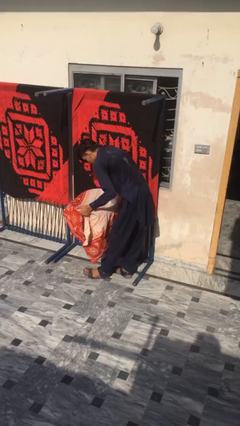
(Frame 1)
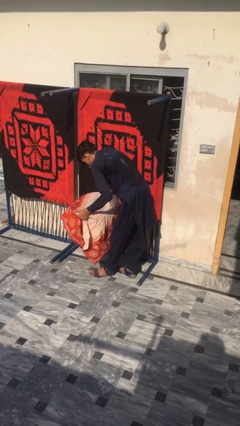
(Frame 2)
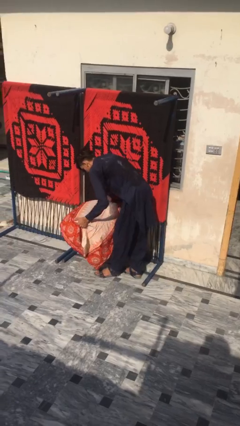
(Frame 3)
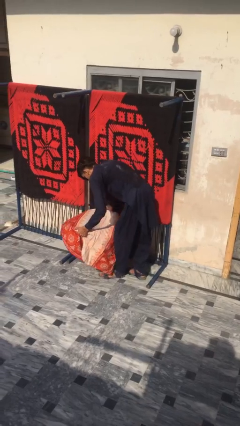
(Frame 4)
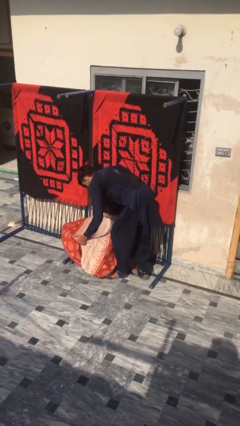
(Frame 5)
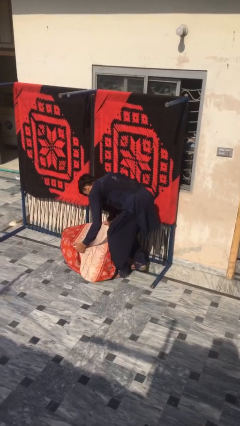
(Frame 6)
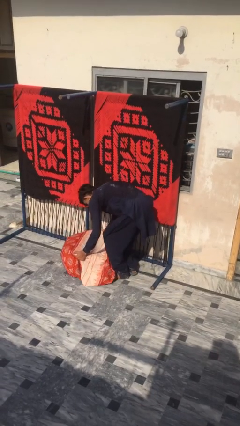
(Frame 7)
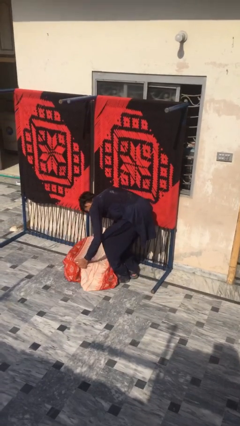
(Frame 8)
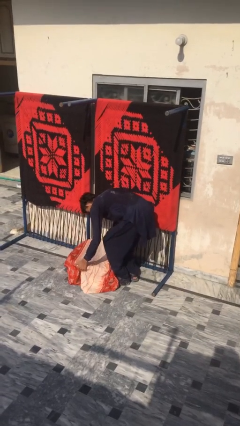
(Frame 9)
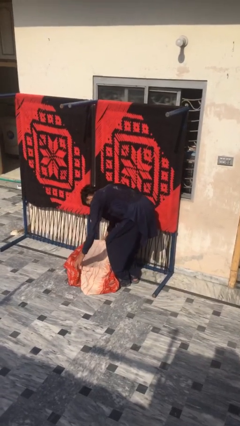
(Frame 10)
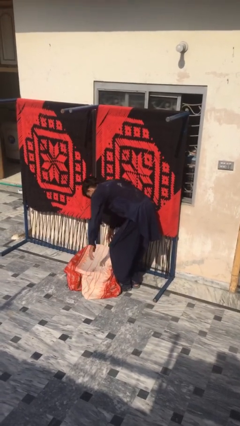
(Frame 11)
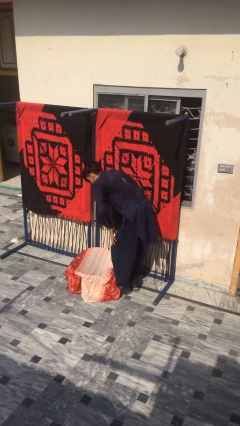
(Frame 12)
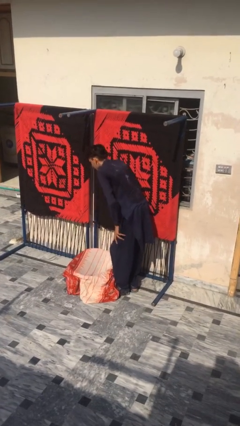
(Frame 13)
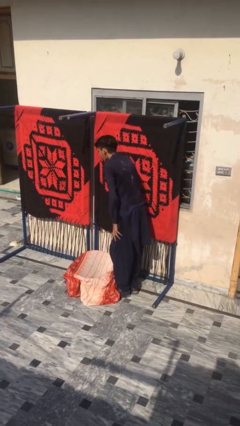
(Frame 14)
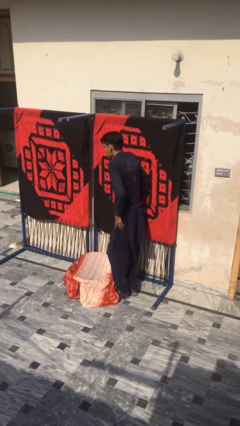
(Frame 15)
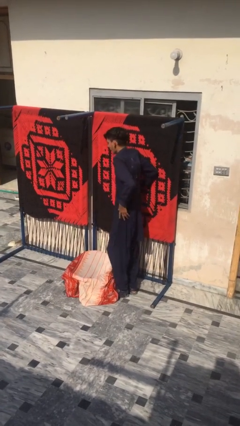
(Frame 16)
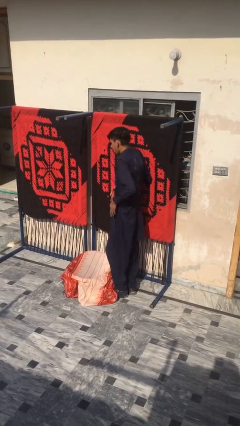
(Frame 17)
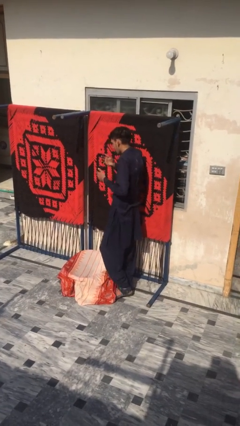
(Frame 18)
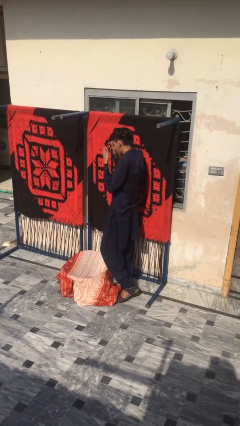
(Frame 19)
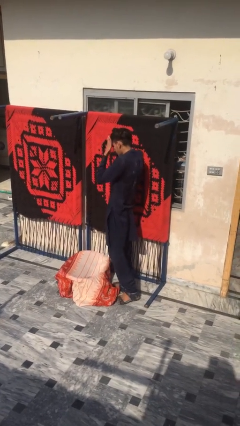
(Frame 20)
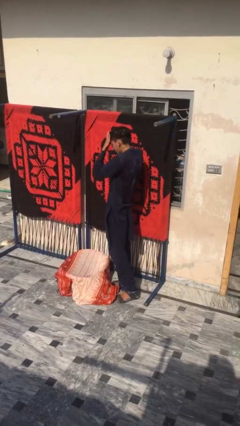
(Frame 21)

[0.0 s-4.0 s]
person puts down object on floor

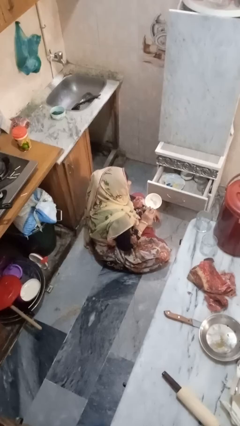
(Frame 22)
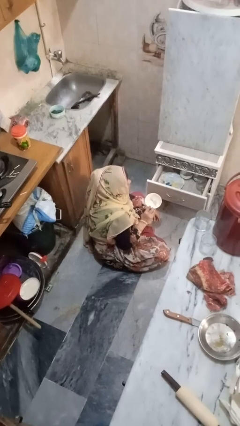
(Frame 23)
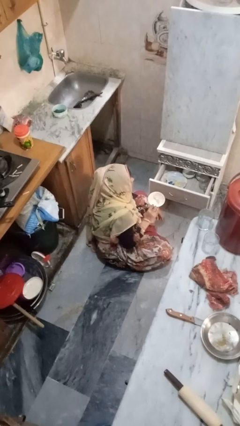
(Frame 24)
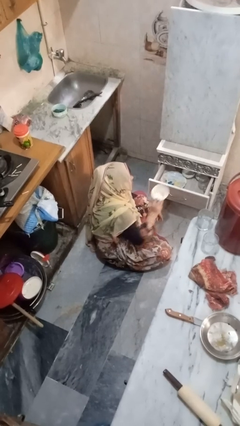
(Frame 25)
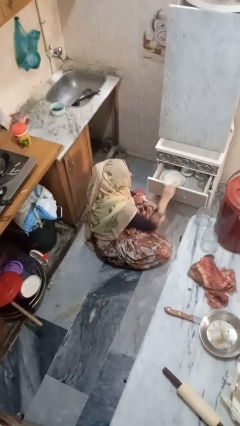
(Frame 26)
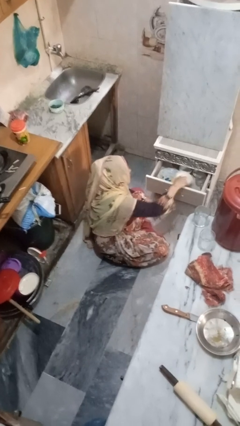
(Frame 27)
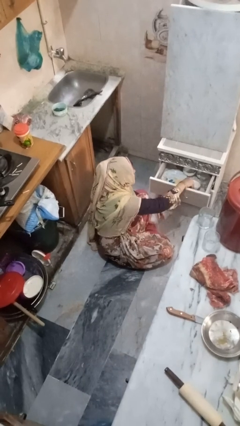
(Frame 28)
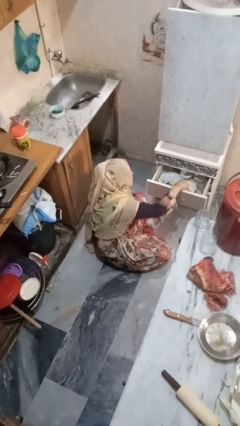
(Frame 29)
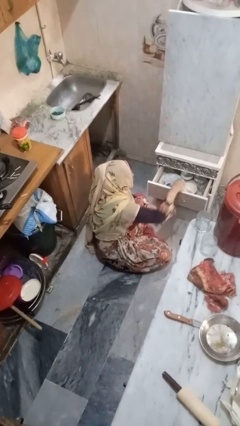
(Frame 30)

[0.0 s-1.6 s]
person puts object into kitchen drawer

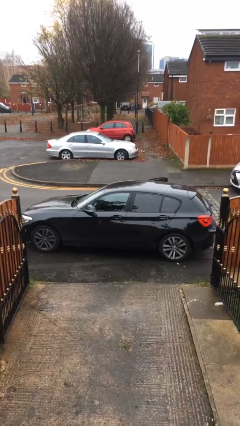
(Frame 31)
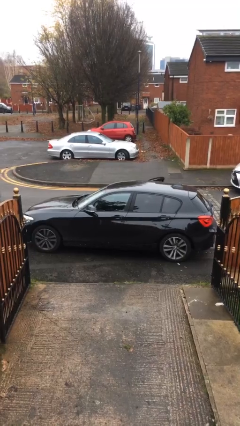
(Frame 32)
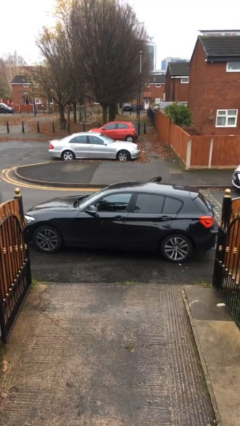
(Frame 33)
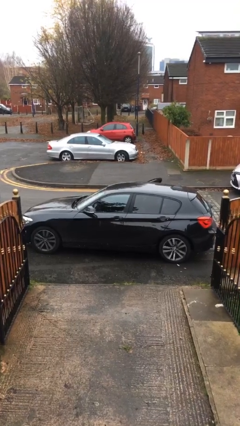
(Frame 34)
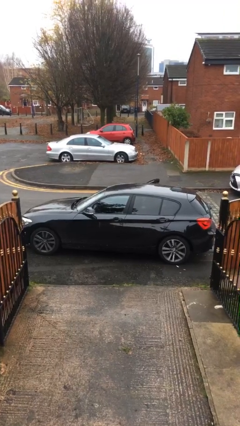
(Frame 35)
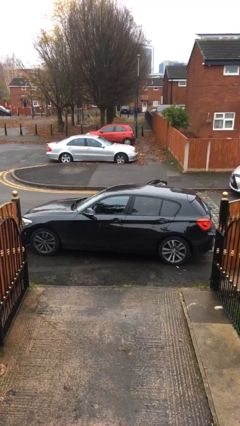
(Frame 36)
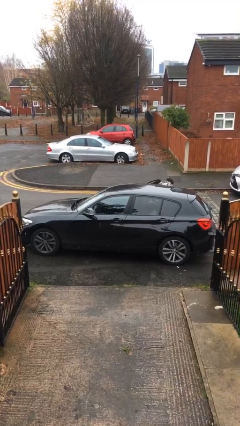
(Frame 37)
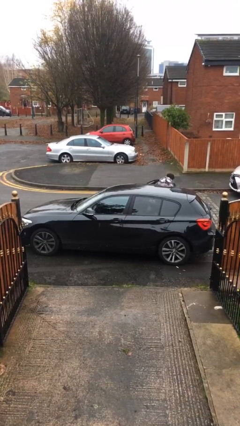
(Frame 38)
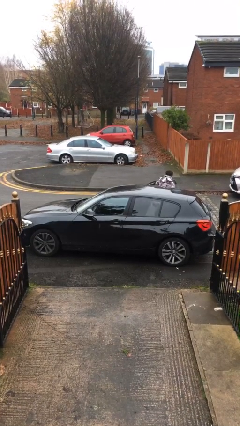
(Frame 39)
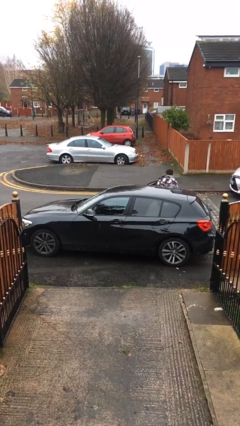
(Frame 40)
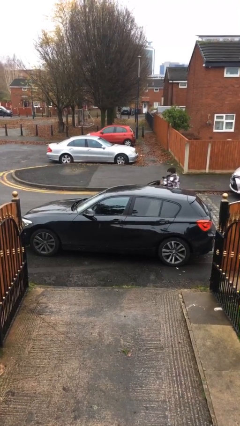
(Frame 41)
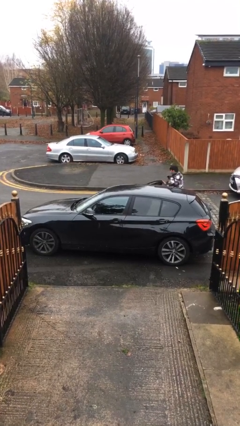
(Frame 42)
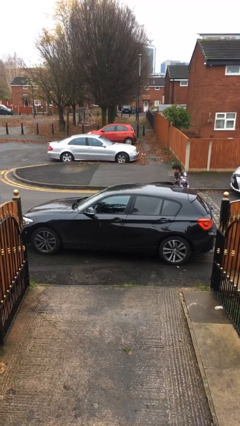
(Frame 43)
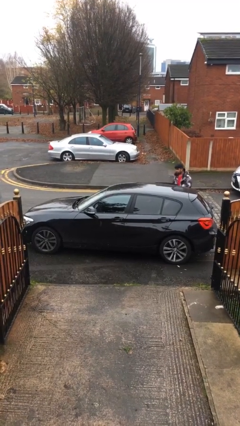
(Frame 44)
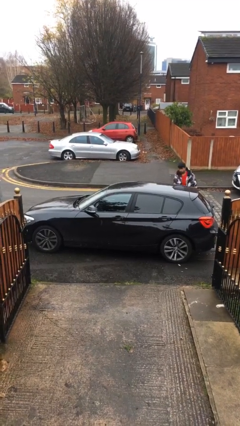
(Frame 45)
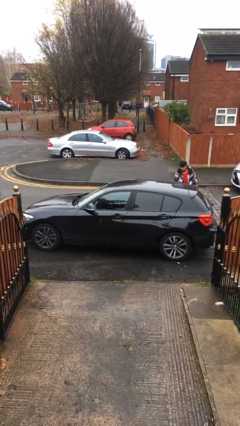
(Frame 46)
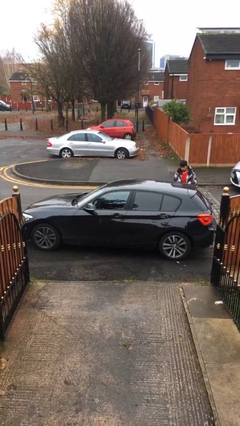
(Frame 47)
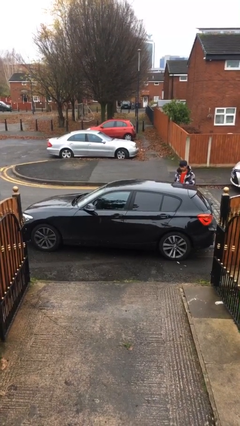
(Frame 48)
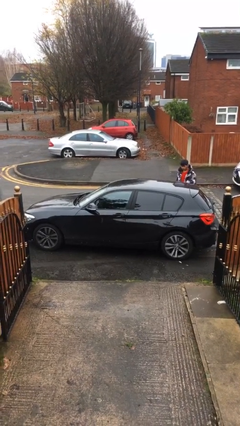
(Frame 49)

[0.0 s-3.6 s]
car drops off person

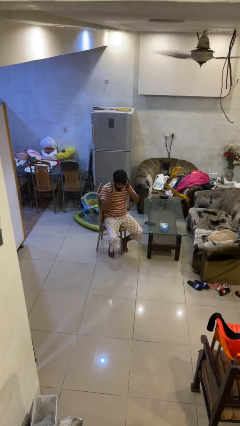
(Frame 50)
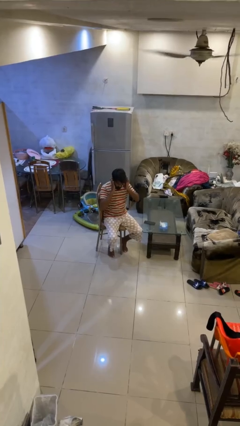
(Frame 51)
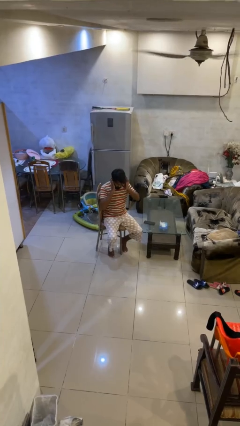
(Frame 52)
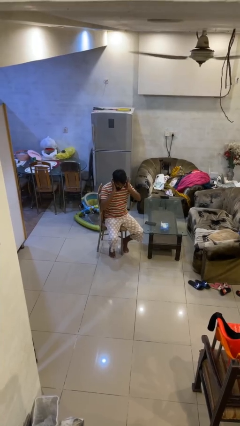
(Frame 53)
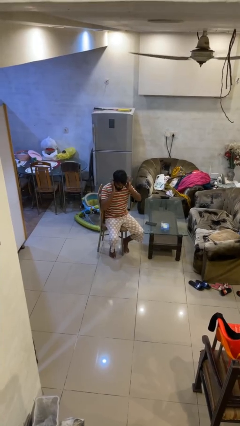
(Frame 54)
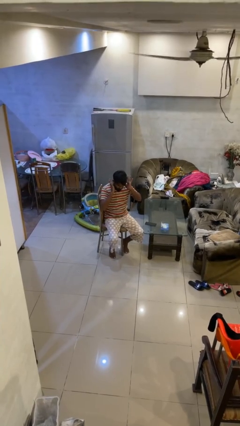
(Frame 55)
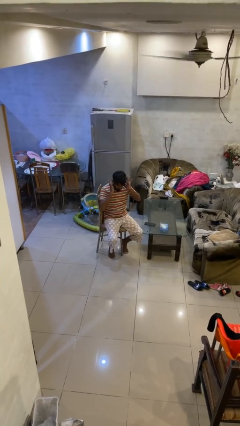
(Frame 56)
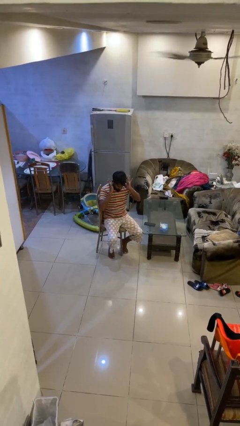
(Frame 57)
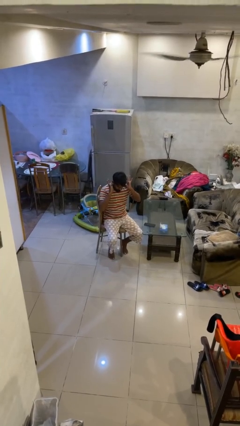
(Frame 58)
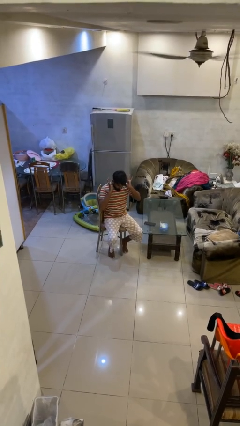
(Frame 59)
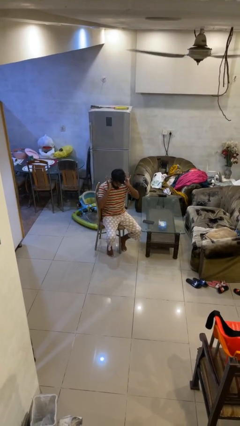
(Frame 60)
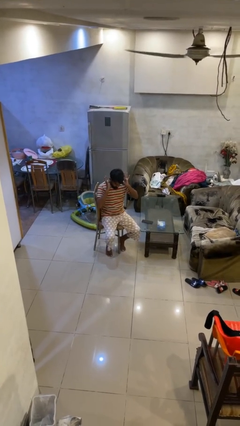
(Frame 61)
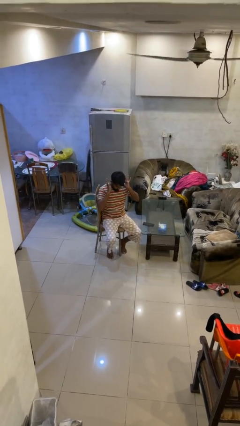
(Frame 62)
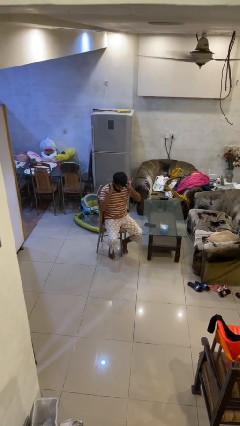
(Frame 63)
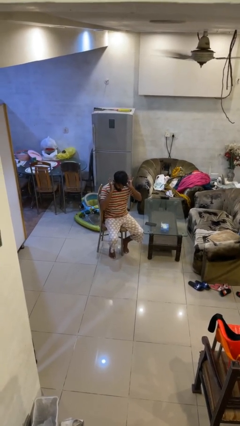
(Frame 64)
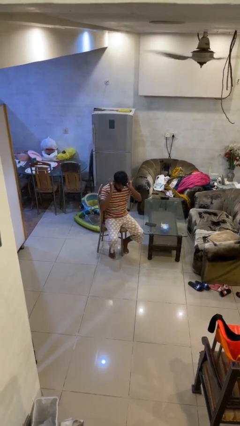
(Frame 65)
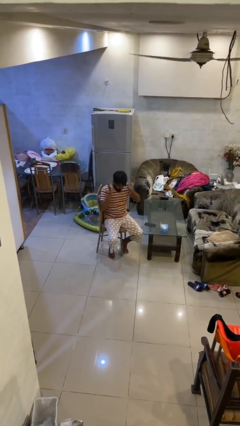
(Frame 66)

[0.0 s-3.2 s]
person puts fingers in ear

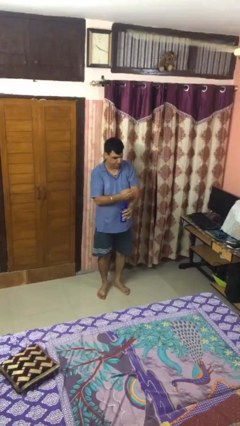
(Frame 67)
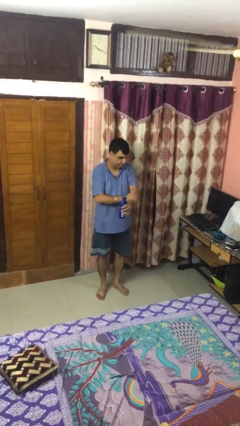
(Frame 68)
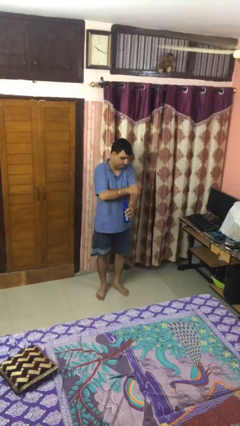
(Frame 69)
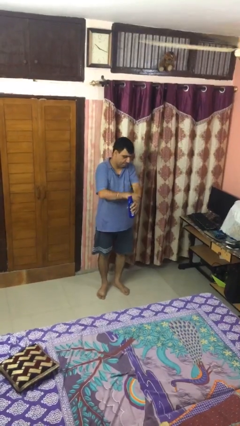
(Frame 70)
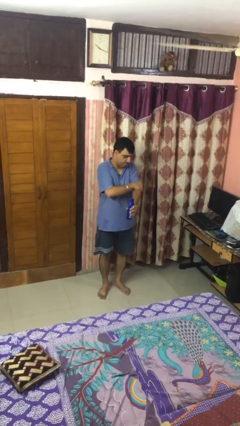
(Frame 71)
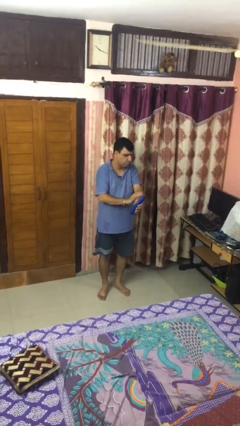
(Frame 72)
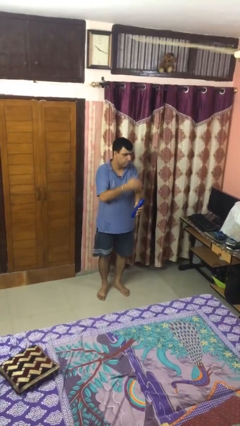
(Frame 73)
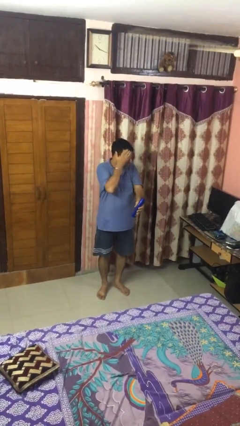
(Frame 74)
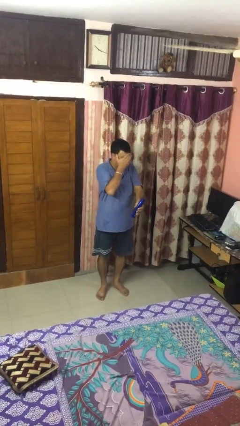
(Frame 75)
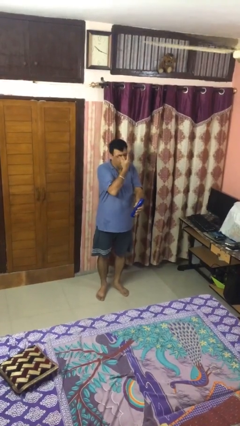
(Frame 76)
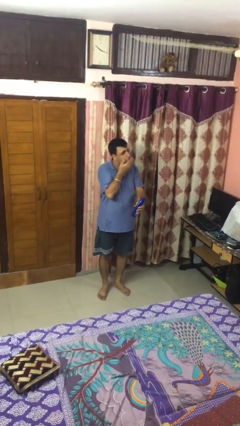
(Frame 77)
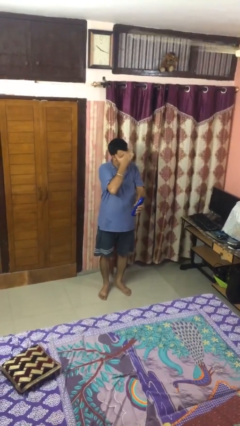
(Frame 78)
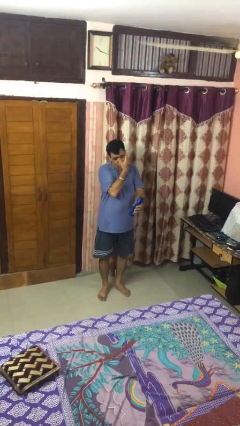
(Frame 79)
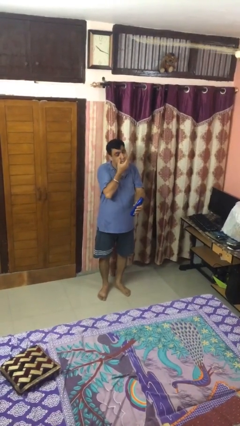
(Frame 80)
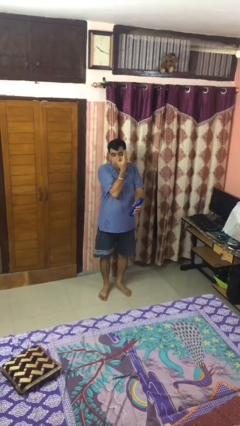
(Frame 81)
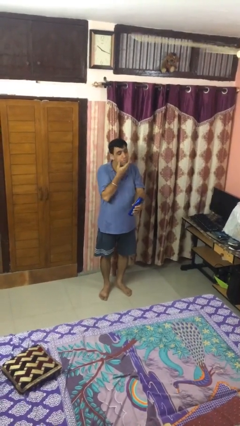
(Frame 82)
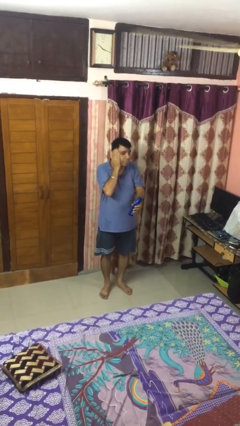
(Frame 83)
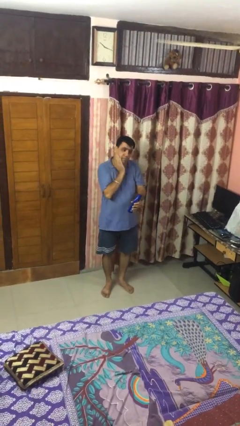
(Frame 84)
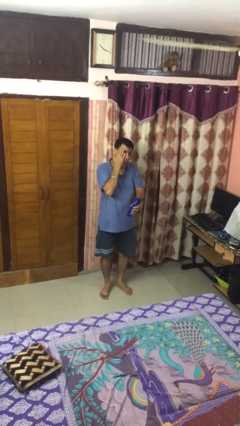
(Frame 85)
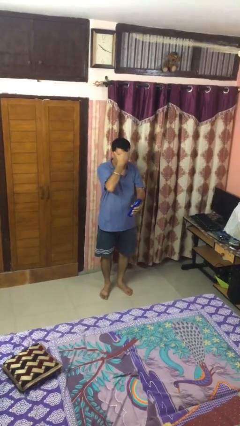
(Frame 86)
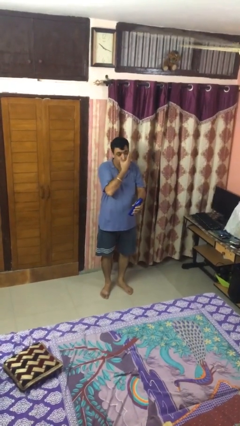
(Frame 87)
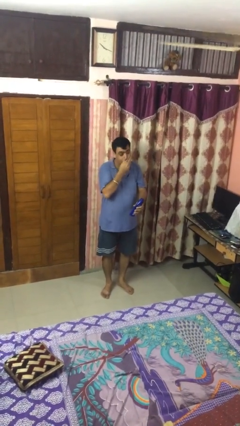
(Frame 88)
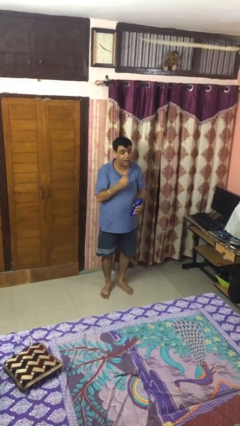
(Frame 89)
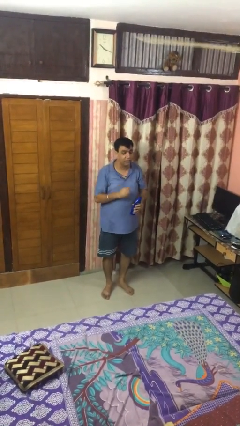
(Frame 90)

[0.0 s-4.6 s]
person applies facial moisturizer

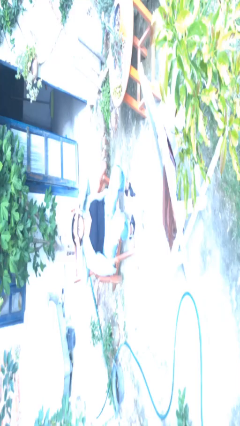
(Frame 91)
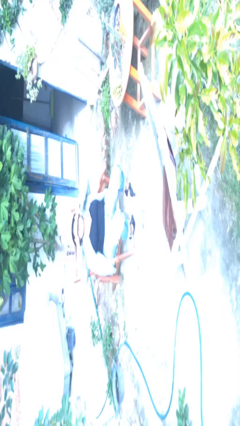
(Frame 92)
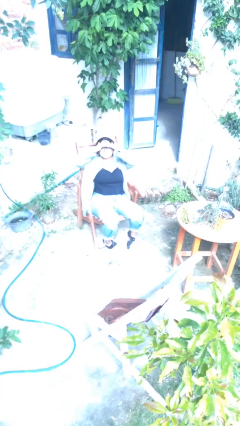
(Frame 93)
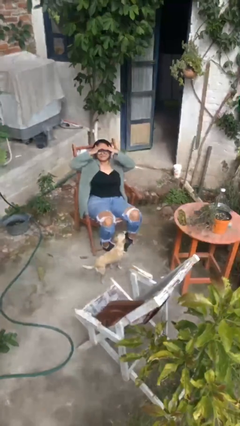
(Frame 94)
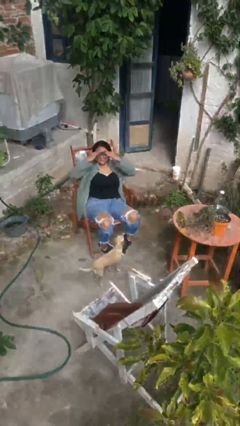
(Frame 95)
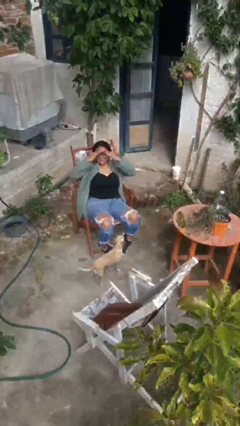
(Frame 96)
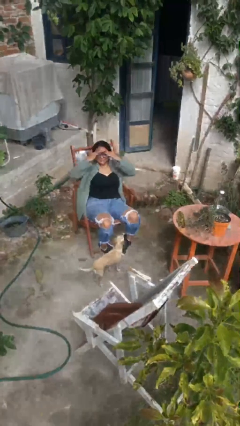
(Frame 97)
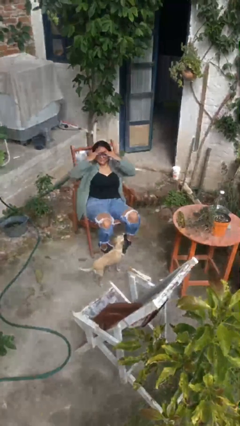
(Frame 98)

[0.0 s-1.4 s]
person slaps hands on thighs
